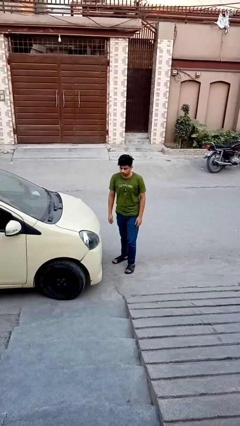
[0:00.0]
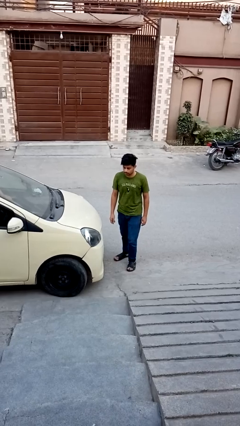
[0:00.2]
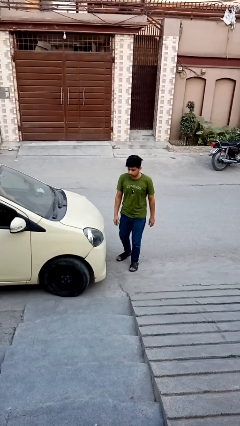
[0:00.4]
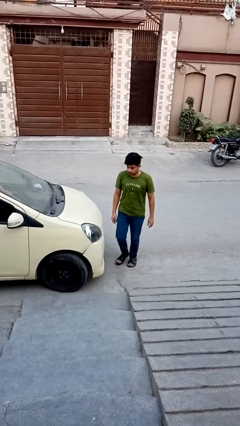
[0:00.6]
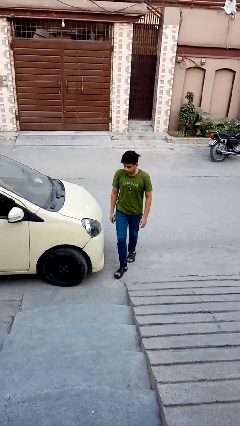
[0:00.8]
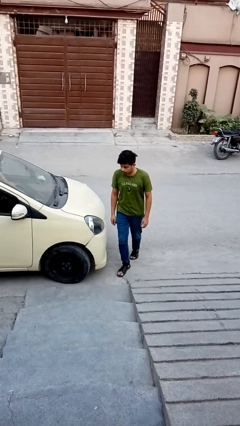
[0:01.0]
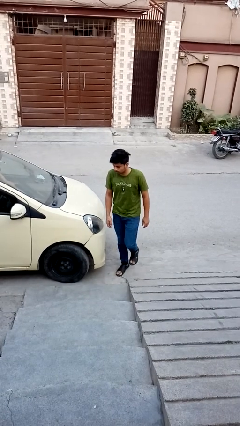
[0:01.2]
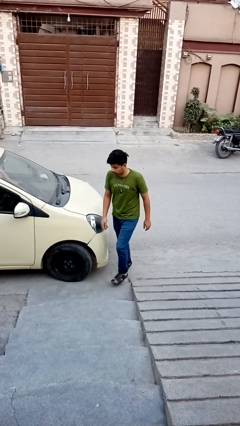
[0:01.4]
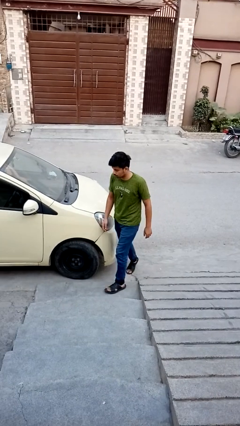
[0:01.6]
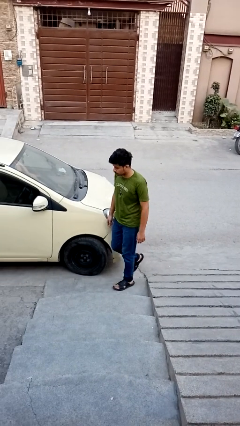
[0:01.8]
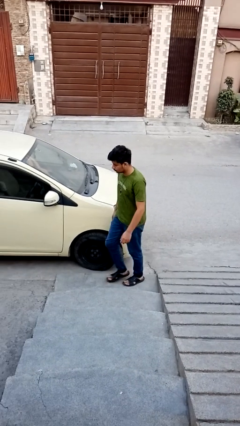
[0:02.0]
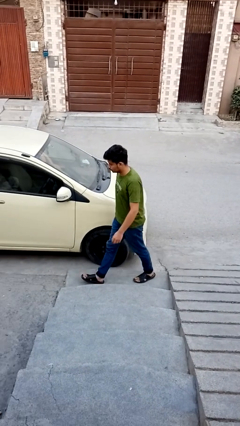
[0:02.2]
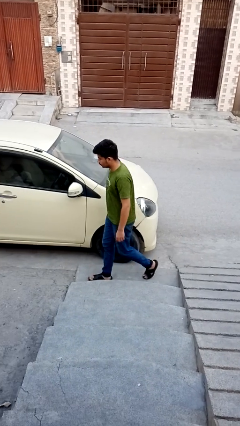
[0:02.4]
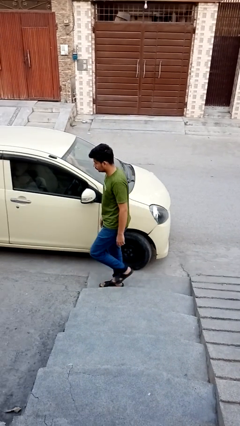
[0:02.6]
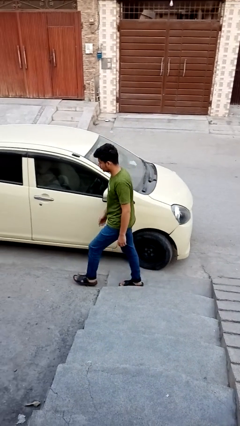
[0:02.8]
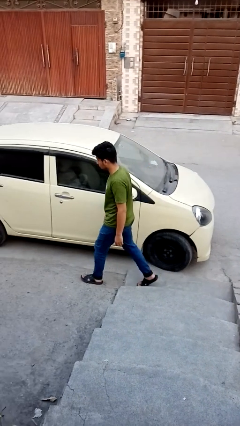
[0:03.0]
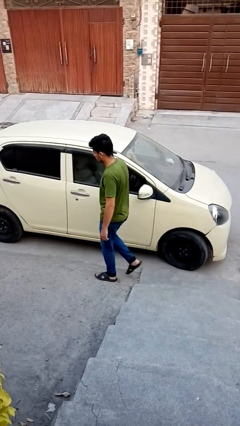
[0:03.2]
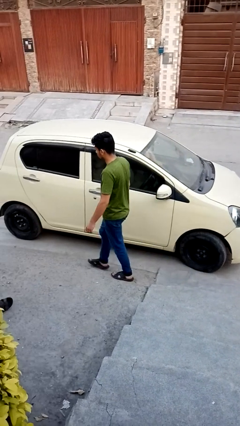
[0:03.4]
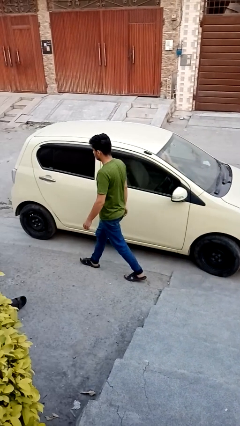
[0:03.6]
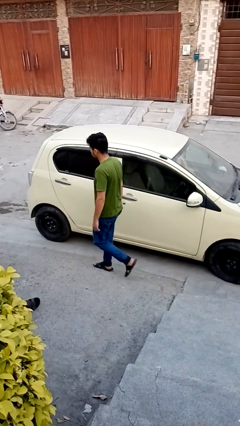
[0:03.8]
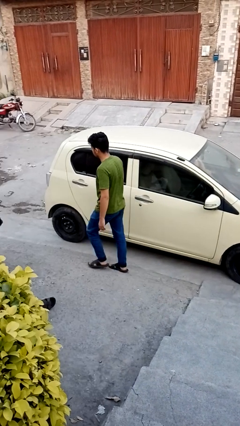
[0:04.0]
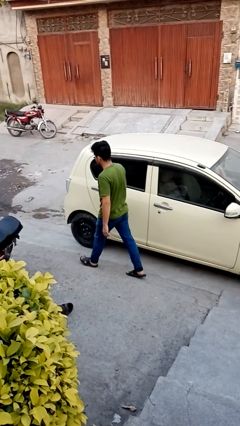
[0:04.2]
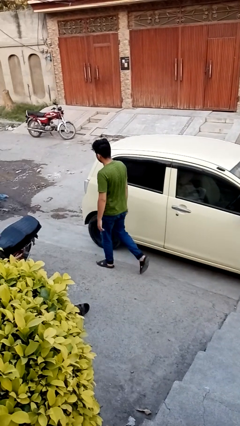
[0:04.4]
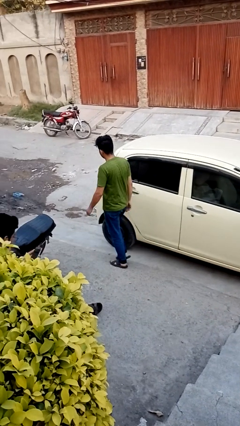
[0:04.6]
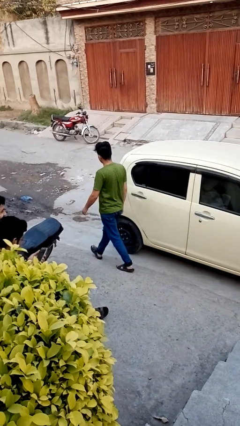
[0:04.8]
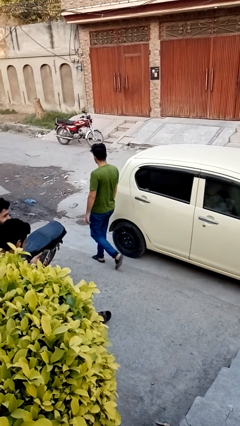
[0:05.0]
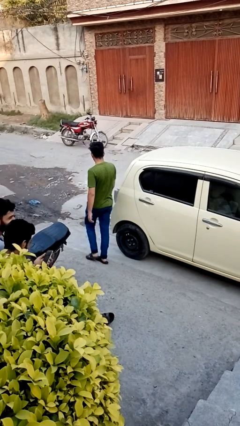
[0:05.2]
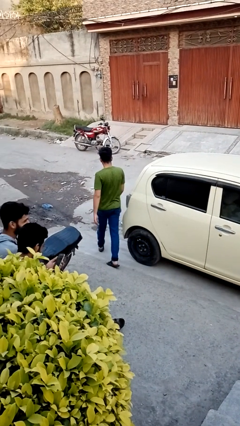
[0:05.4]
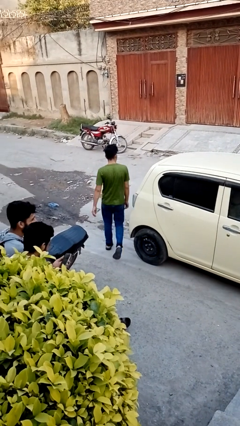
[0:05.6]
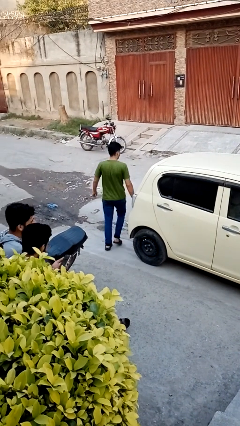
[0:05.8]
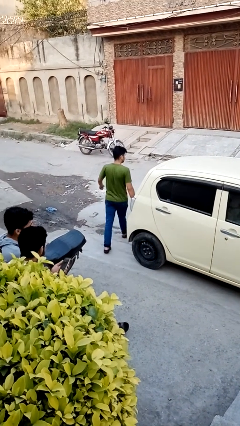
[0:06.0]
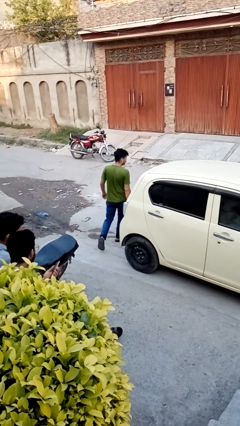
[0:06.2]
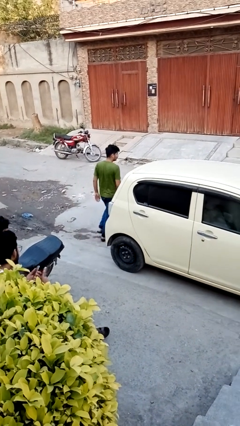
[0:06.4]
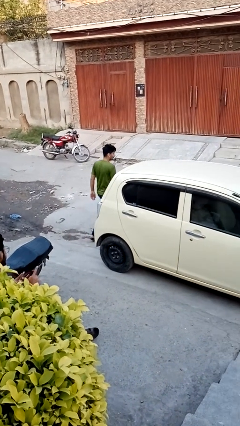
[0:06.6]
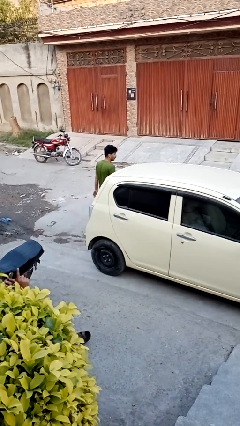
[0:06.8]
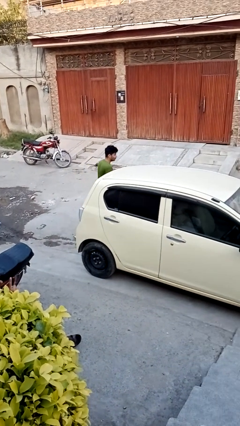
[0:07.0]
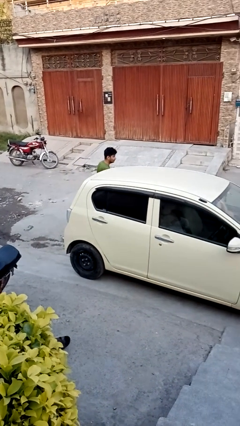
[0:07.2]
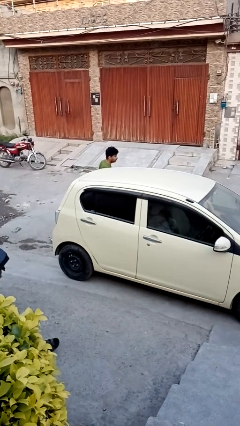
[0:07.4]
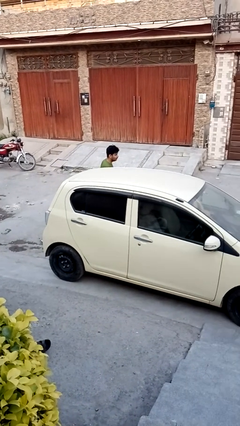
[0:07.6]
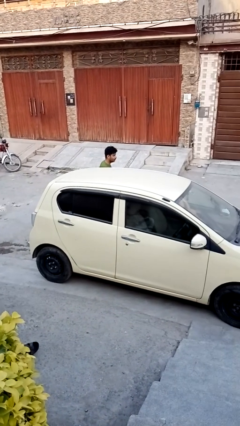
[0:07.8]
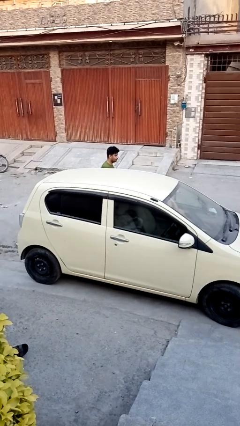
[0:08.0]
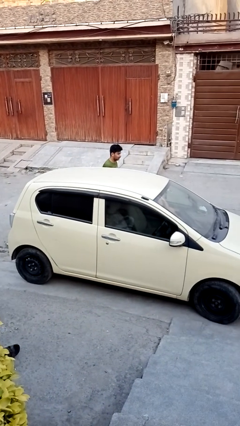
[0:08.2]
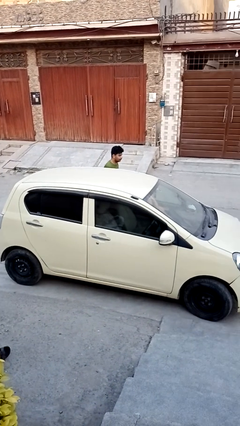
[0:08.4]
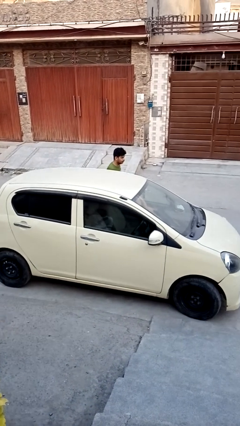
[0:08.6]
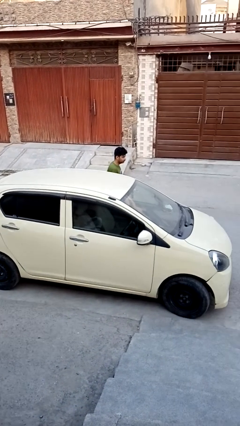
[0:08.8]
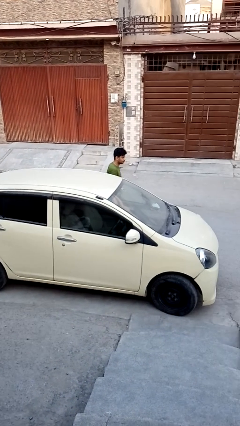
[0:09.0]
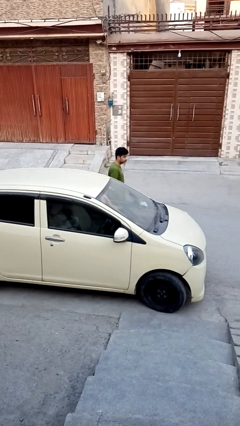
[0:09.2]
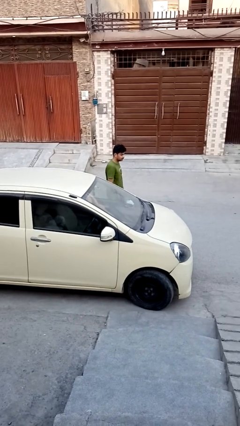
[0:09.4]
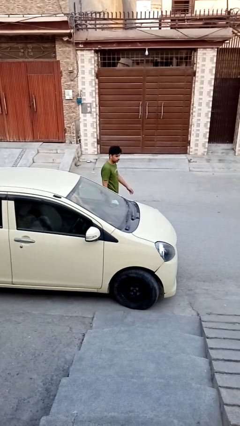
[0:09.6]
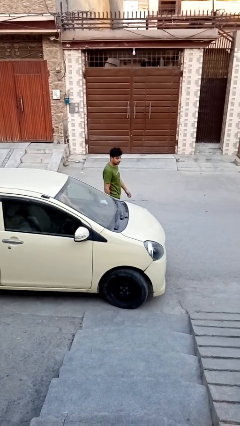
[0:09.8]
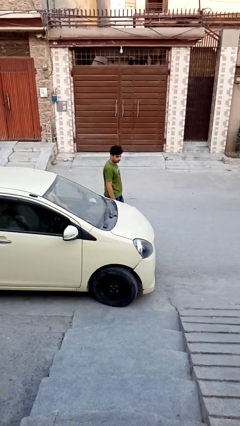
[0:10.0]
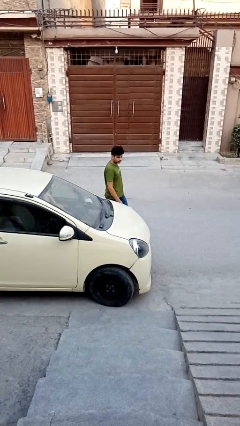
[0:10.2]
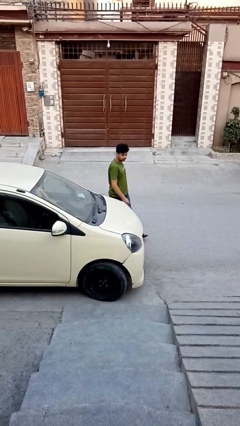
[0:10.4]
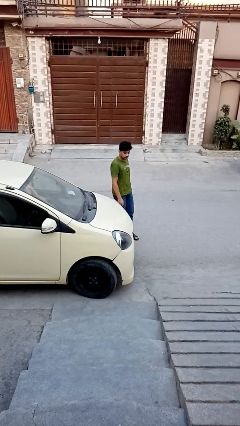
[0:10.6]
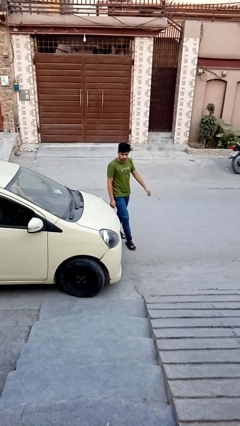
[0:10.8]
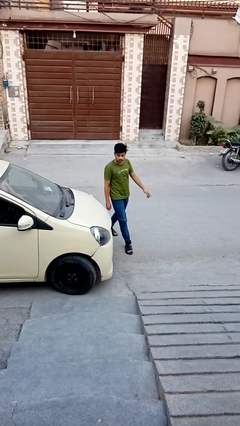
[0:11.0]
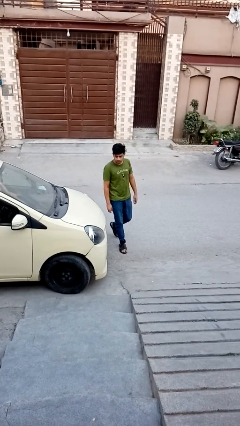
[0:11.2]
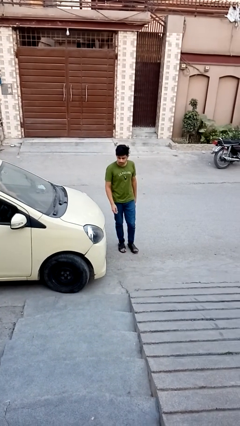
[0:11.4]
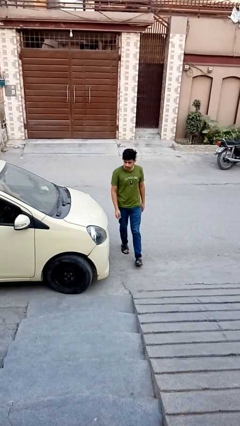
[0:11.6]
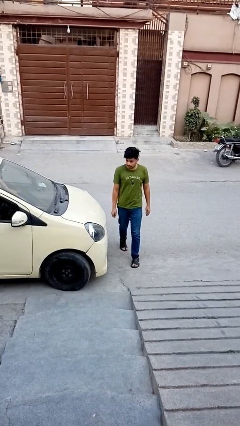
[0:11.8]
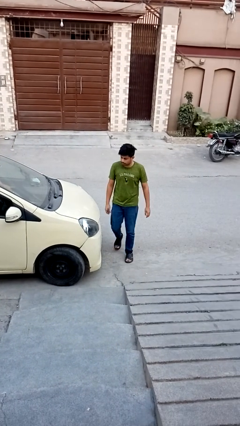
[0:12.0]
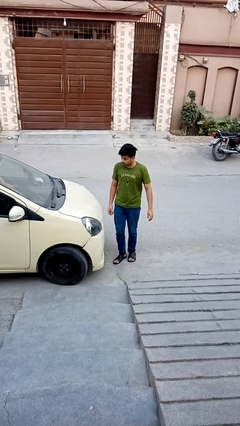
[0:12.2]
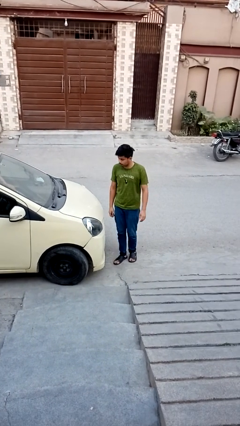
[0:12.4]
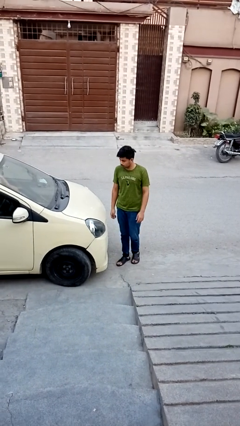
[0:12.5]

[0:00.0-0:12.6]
person walks around car

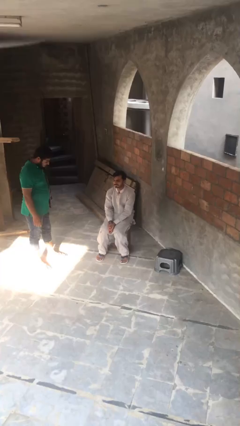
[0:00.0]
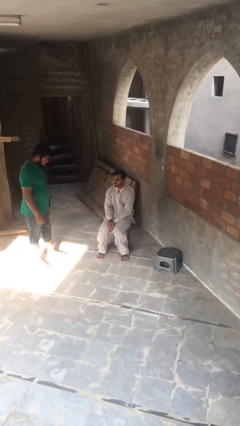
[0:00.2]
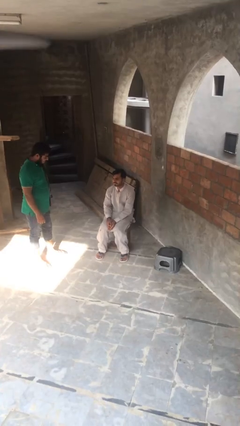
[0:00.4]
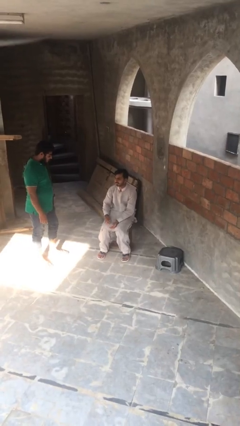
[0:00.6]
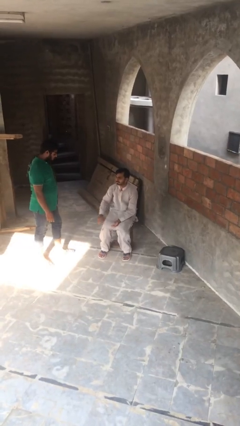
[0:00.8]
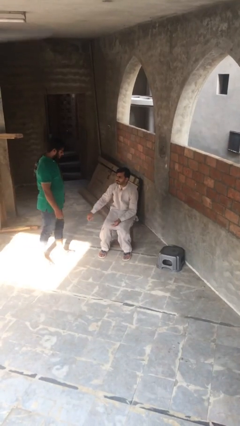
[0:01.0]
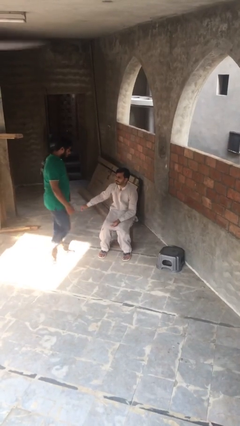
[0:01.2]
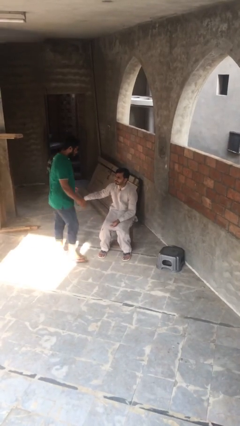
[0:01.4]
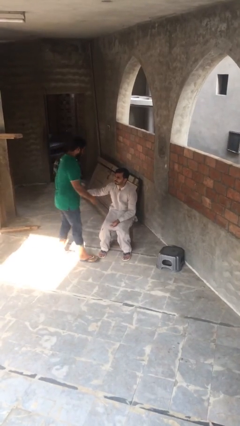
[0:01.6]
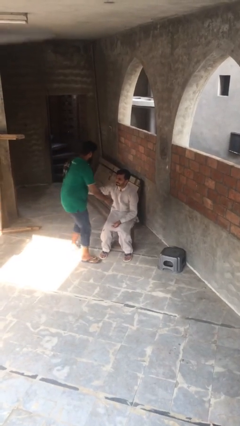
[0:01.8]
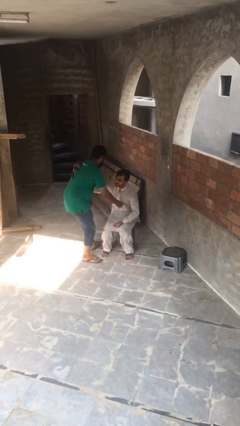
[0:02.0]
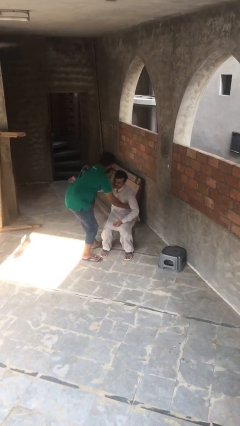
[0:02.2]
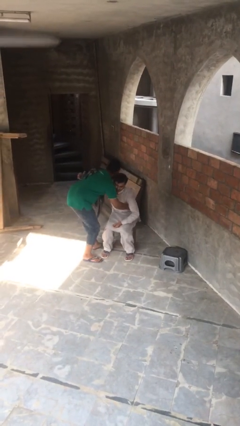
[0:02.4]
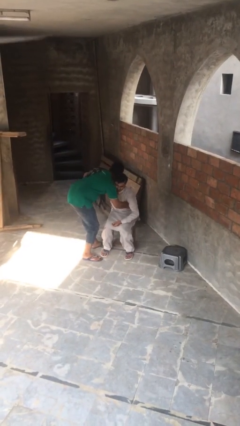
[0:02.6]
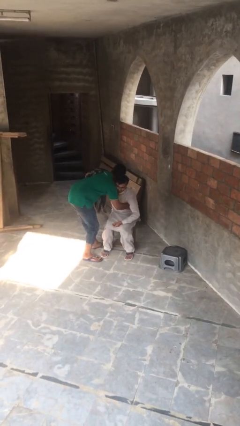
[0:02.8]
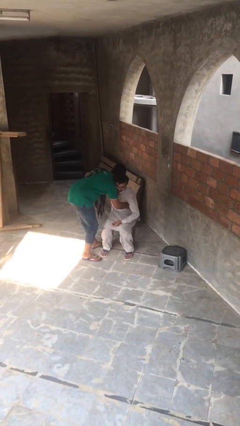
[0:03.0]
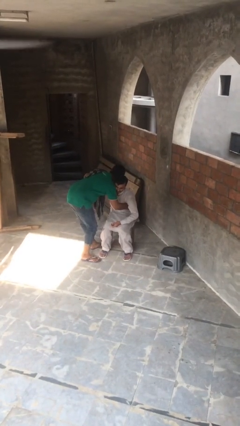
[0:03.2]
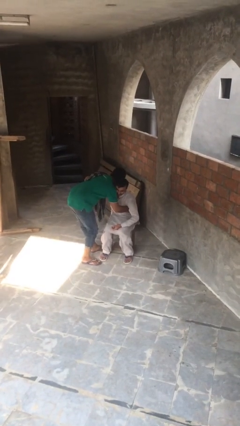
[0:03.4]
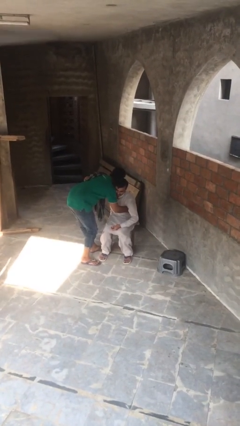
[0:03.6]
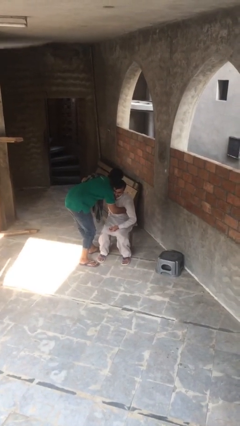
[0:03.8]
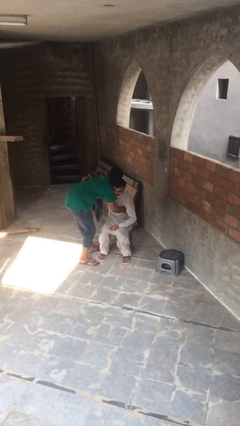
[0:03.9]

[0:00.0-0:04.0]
person embraces person

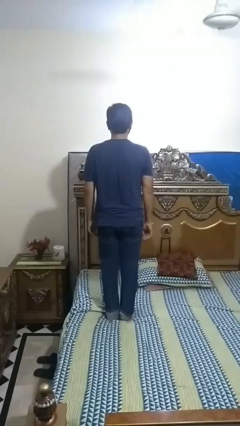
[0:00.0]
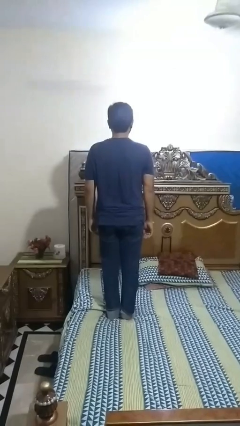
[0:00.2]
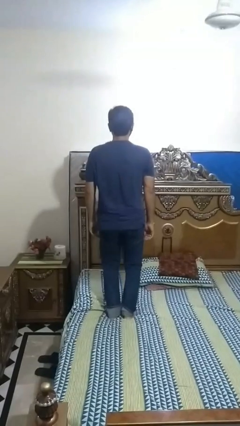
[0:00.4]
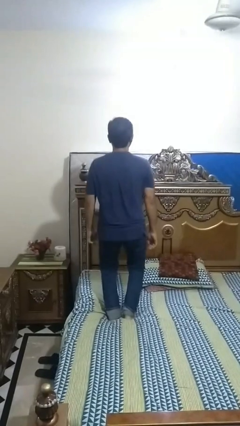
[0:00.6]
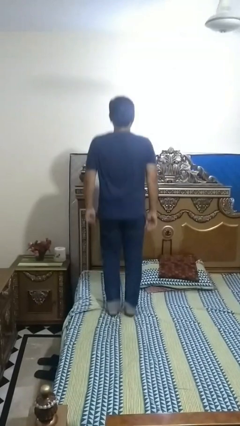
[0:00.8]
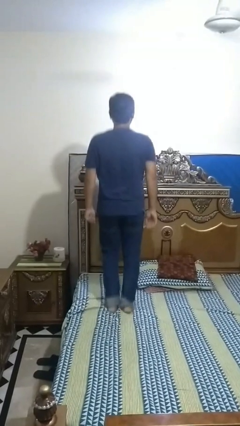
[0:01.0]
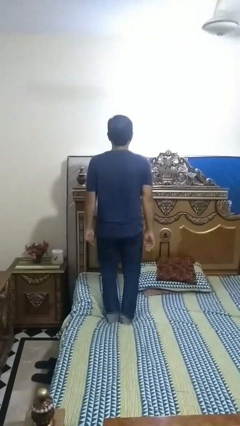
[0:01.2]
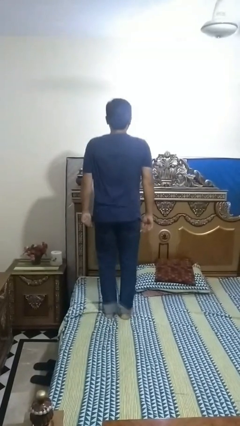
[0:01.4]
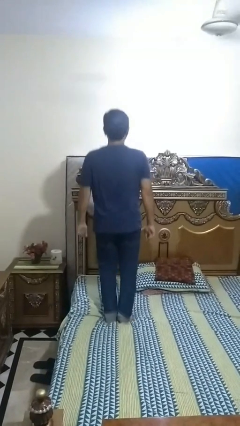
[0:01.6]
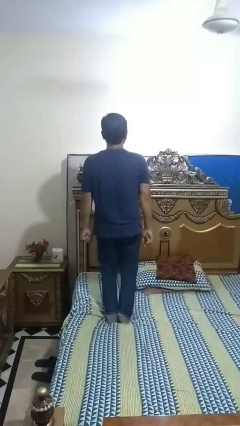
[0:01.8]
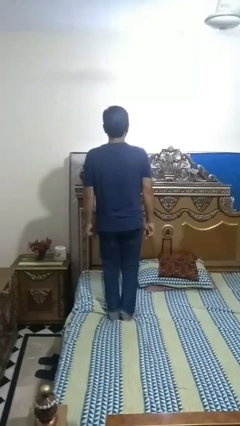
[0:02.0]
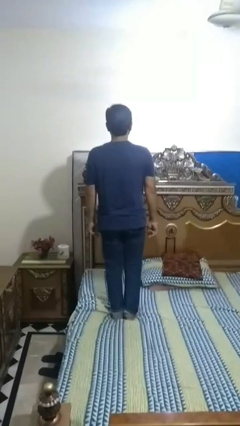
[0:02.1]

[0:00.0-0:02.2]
person jumps on bed
